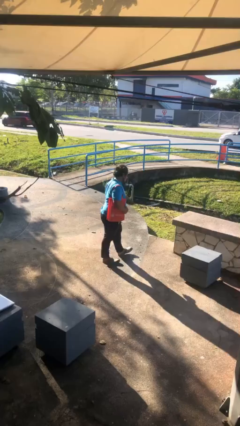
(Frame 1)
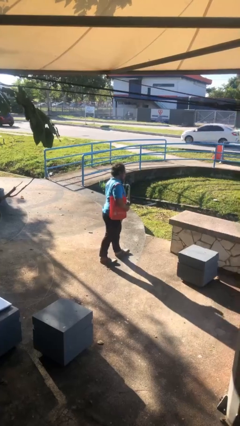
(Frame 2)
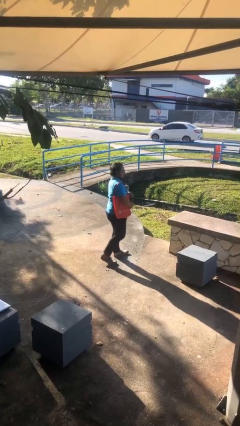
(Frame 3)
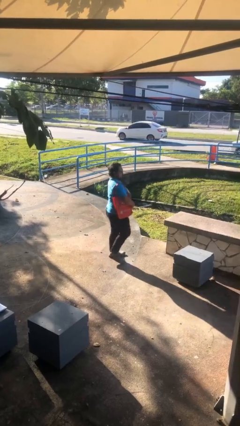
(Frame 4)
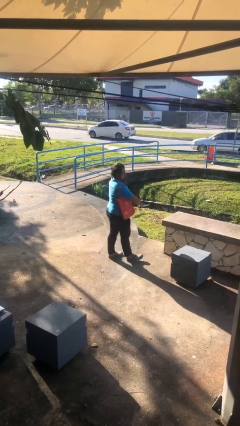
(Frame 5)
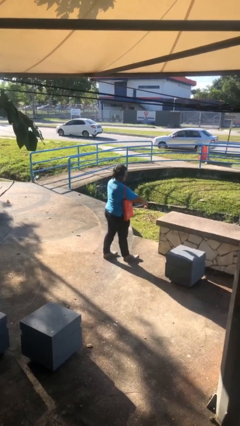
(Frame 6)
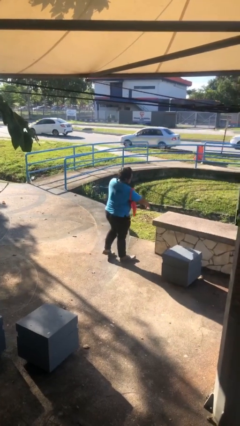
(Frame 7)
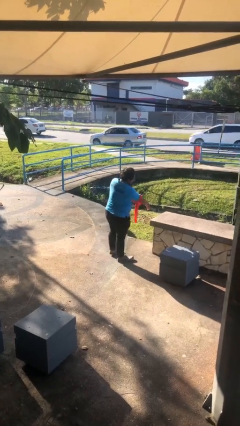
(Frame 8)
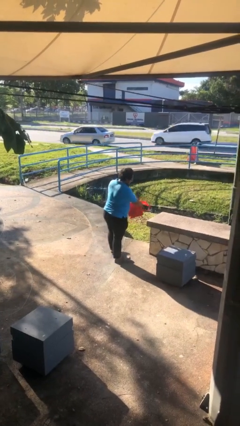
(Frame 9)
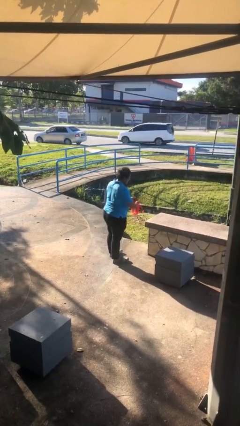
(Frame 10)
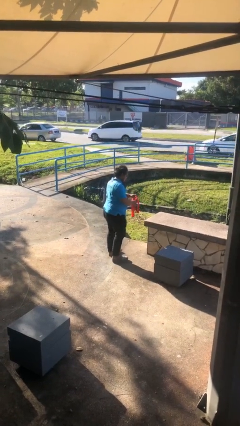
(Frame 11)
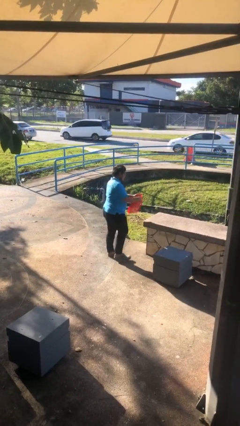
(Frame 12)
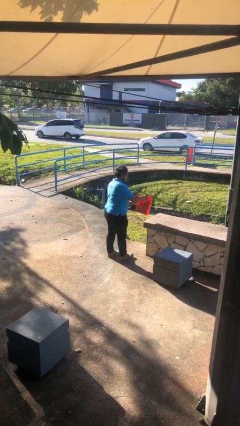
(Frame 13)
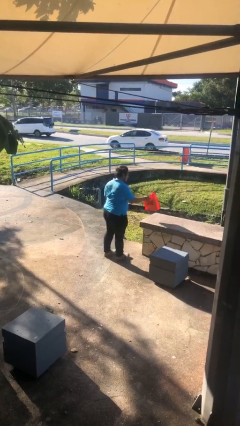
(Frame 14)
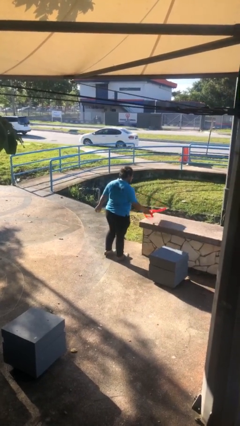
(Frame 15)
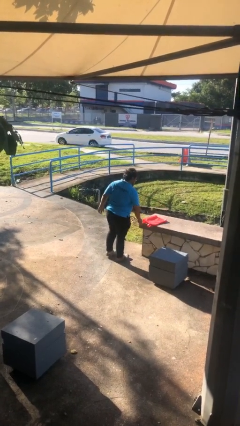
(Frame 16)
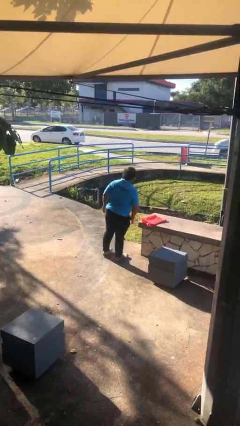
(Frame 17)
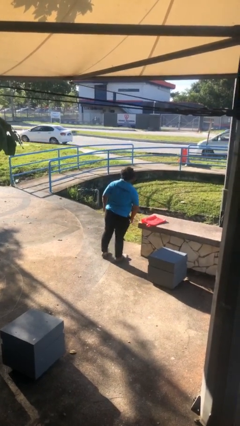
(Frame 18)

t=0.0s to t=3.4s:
person puts down object on table

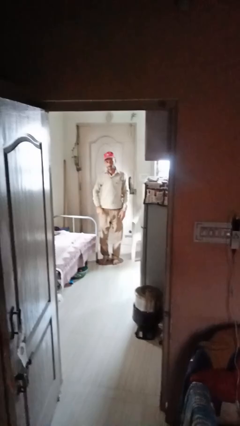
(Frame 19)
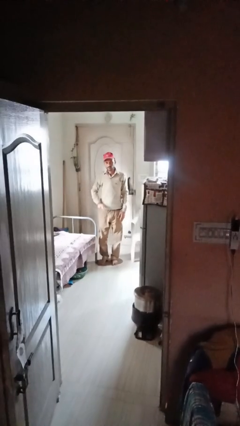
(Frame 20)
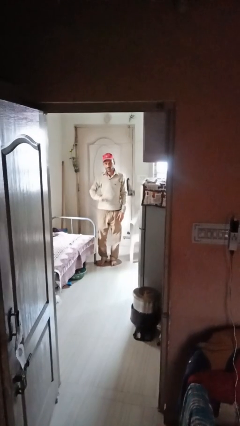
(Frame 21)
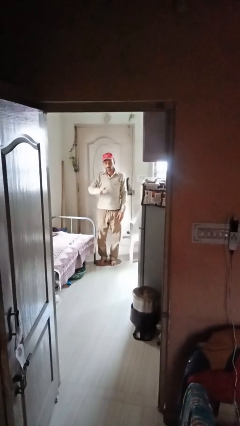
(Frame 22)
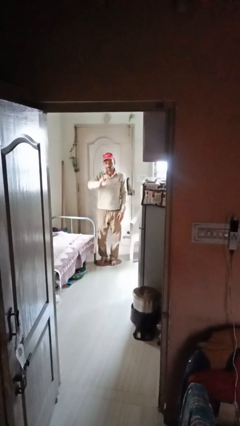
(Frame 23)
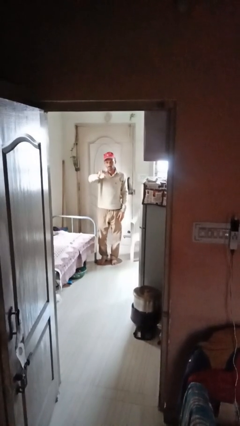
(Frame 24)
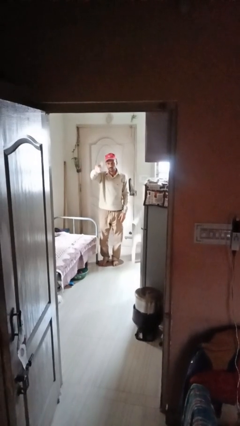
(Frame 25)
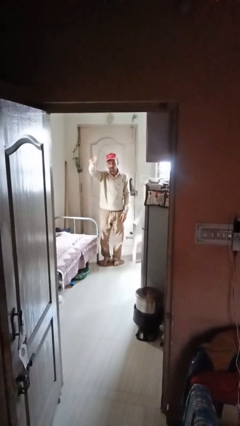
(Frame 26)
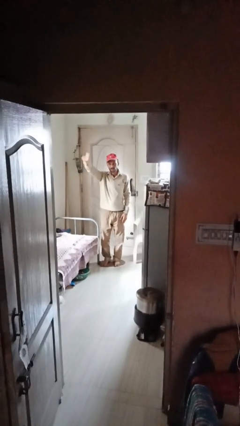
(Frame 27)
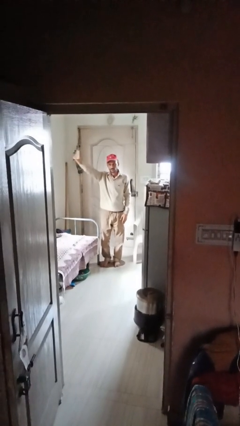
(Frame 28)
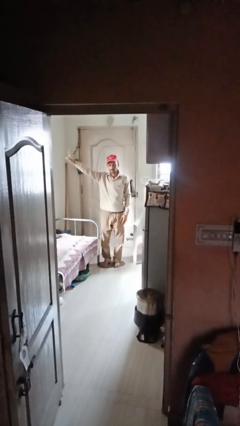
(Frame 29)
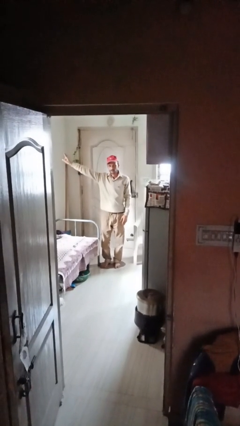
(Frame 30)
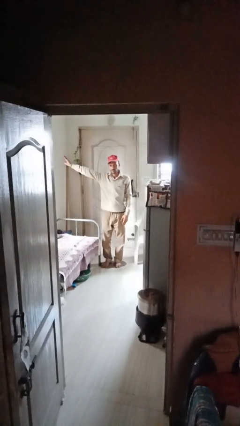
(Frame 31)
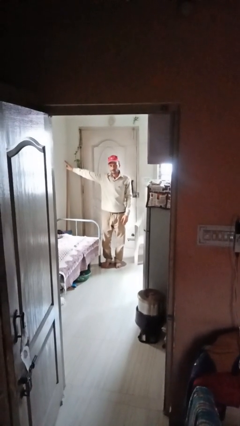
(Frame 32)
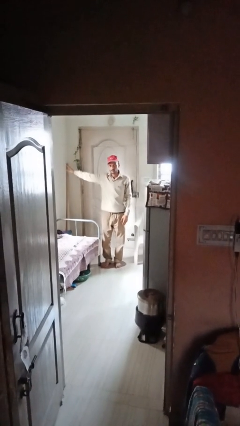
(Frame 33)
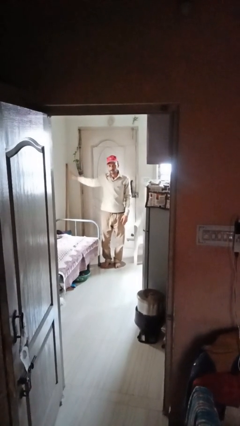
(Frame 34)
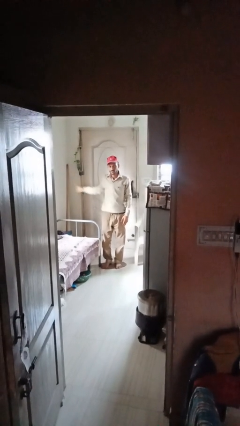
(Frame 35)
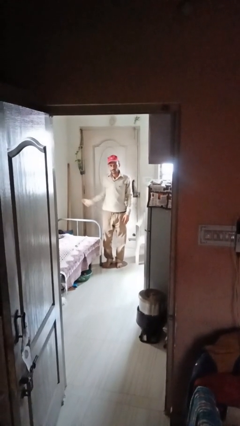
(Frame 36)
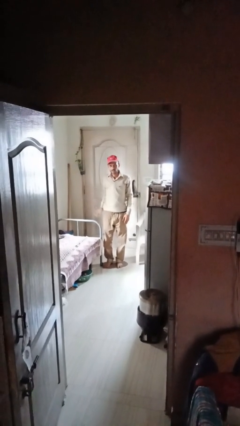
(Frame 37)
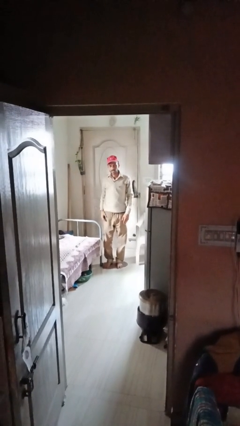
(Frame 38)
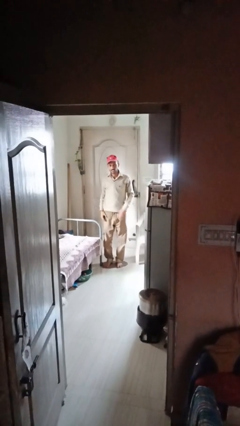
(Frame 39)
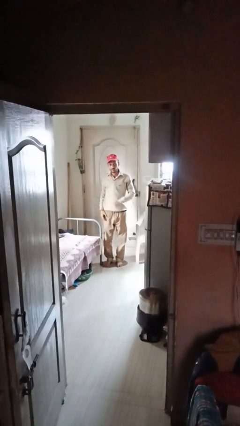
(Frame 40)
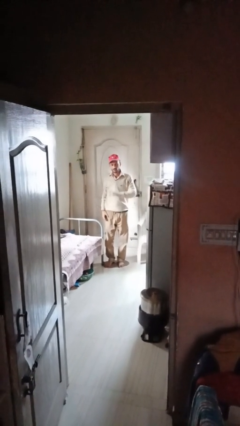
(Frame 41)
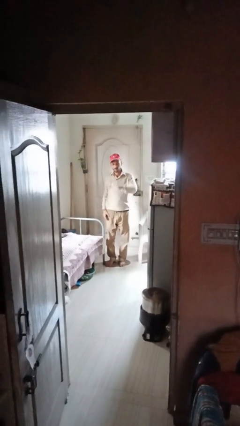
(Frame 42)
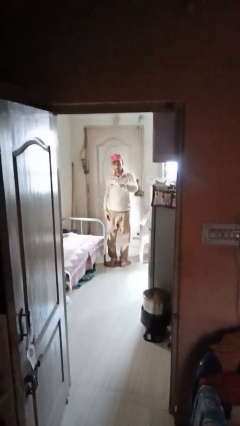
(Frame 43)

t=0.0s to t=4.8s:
person gestures swipe right

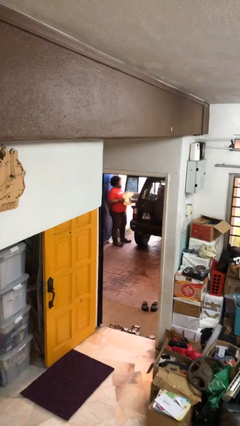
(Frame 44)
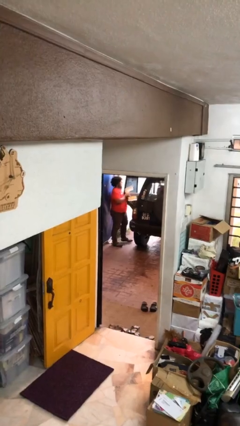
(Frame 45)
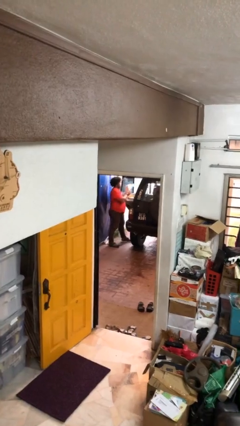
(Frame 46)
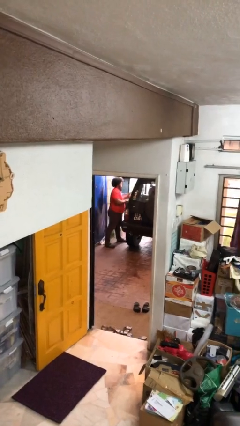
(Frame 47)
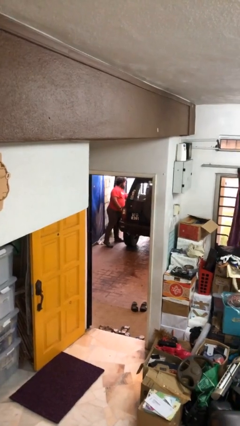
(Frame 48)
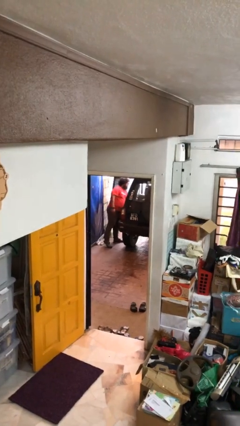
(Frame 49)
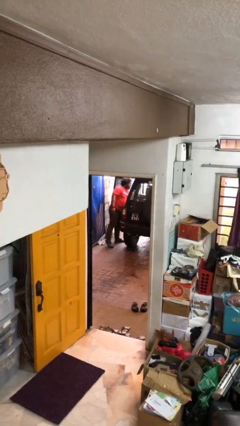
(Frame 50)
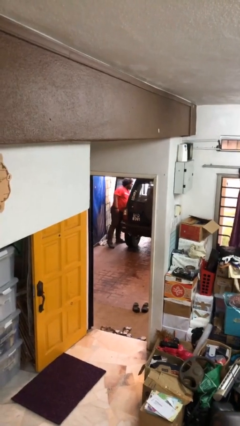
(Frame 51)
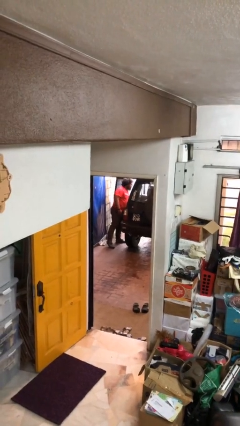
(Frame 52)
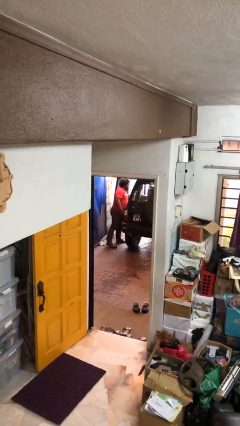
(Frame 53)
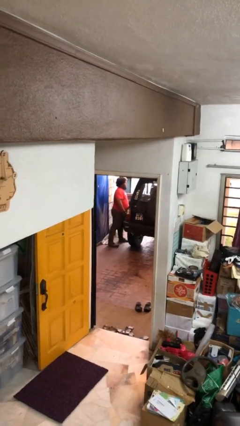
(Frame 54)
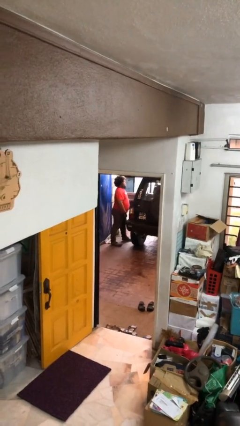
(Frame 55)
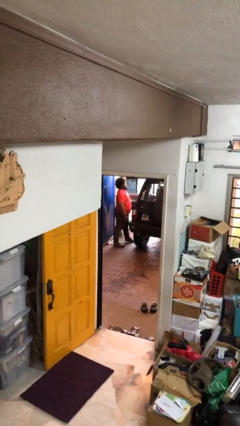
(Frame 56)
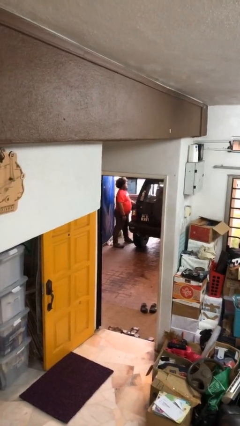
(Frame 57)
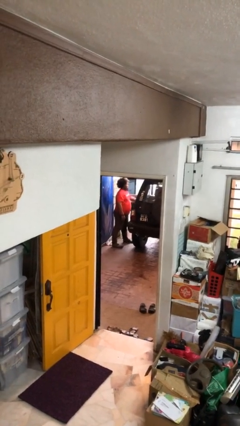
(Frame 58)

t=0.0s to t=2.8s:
person loads car

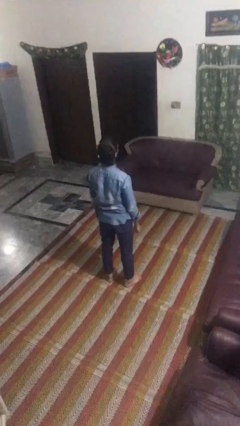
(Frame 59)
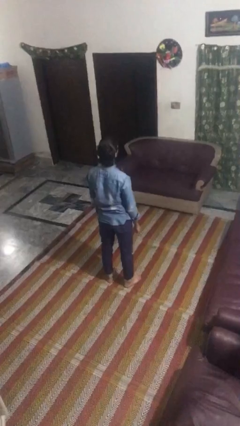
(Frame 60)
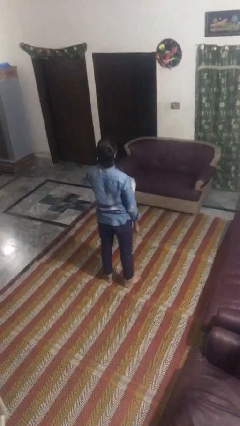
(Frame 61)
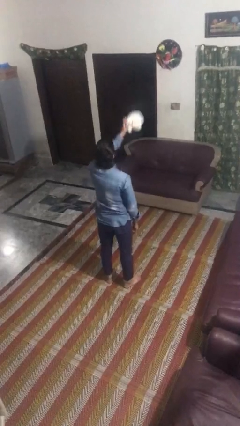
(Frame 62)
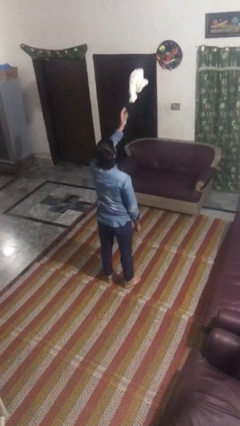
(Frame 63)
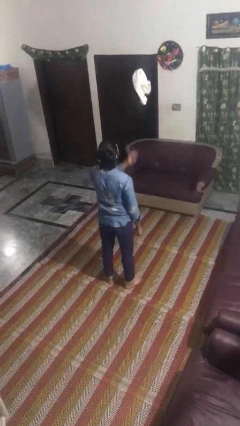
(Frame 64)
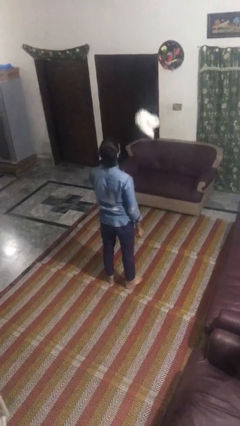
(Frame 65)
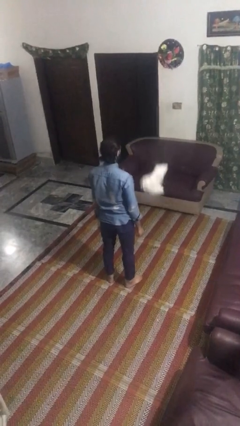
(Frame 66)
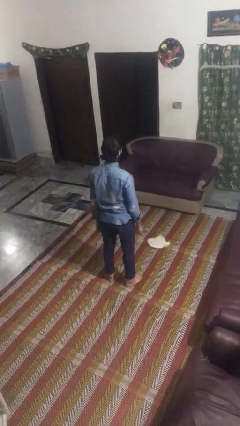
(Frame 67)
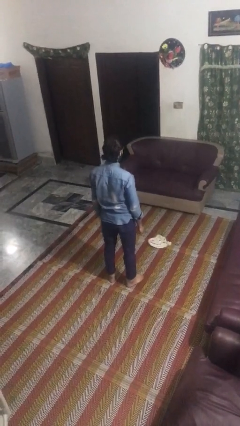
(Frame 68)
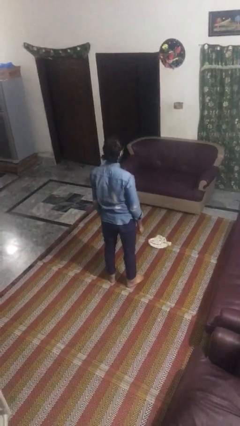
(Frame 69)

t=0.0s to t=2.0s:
person throws object into air

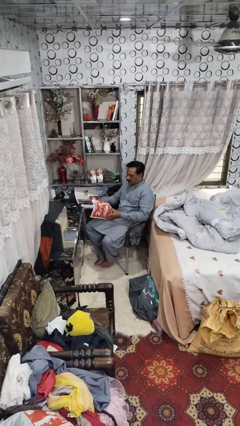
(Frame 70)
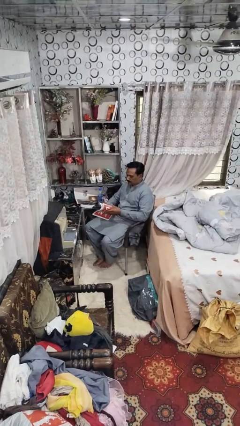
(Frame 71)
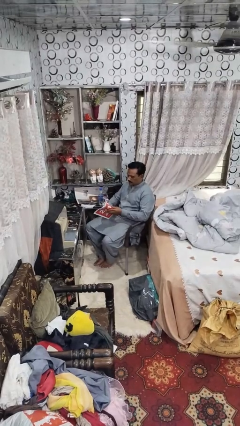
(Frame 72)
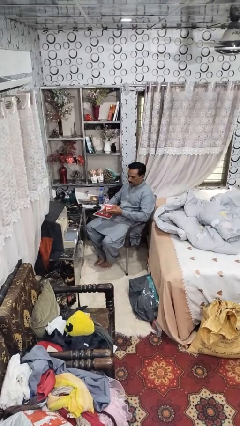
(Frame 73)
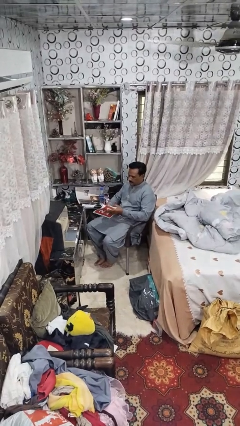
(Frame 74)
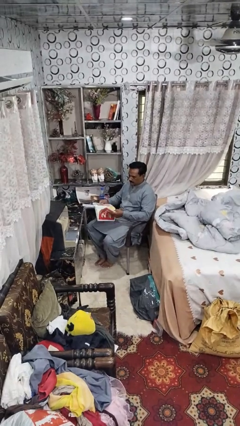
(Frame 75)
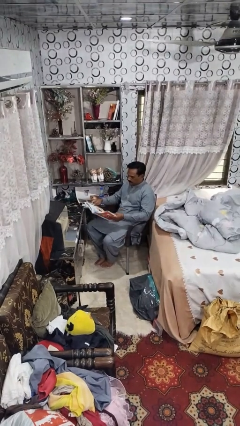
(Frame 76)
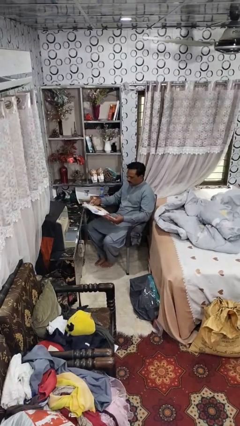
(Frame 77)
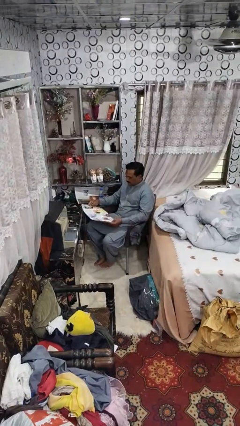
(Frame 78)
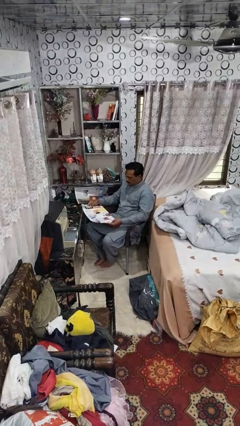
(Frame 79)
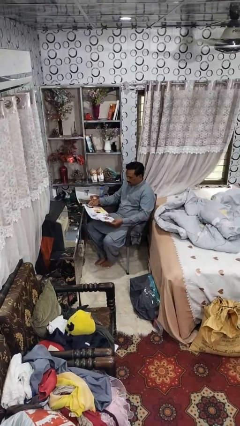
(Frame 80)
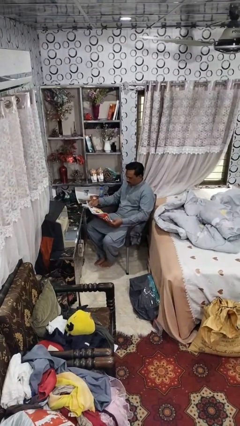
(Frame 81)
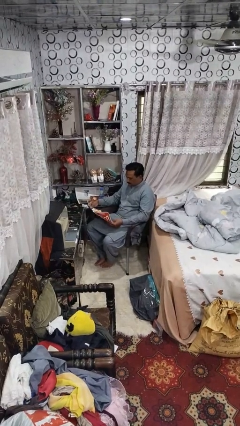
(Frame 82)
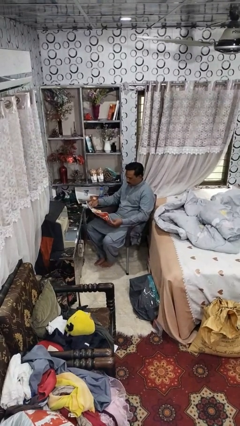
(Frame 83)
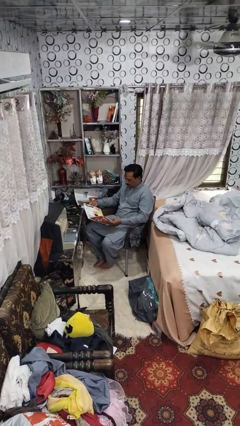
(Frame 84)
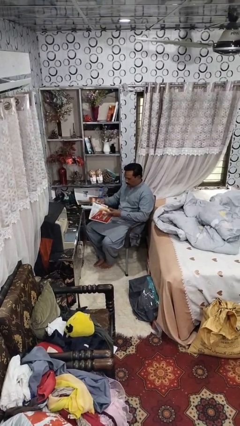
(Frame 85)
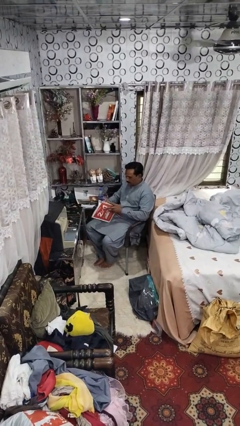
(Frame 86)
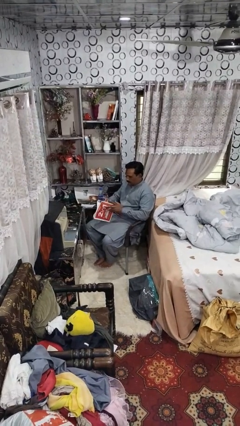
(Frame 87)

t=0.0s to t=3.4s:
person reads magazine

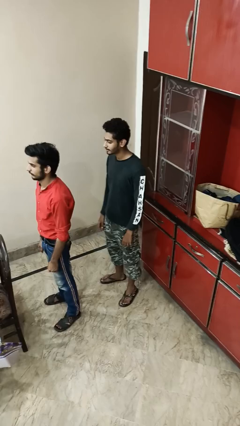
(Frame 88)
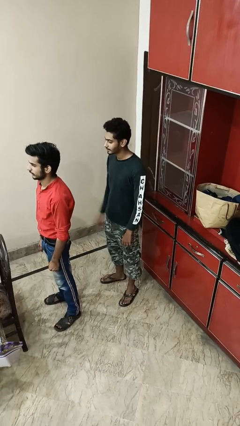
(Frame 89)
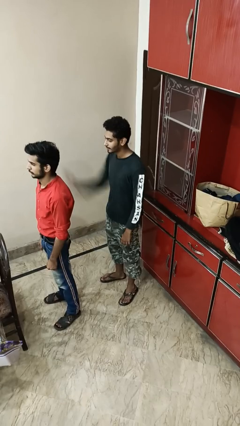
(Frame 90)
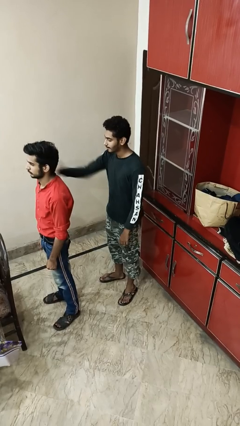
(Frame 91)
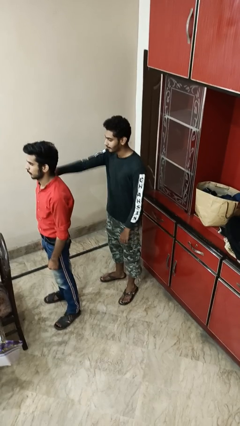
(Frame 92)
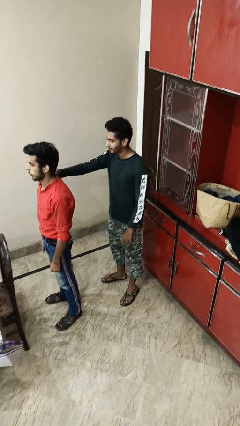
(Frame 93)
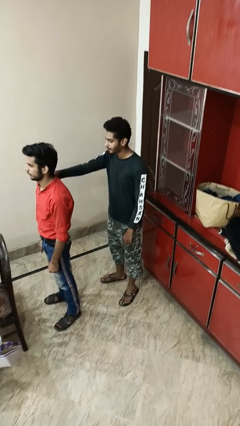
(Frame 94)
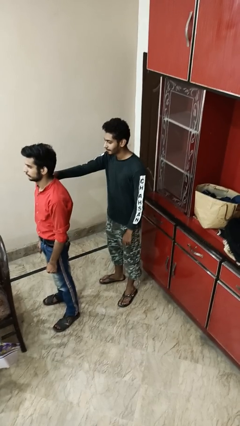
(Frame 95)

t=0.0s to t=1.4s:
person grabs person by shoulder
